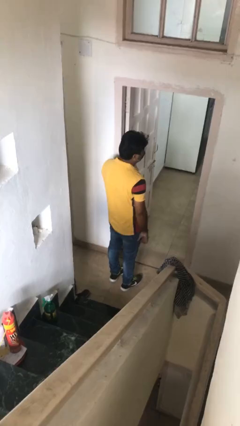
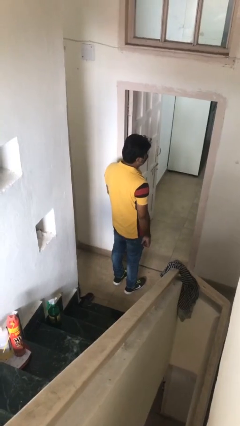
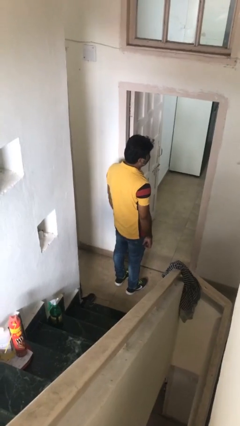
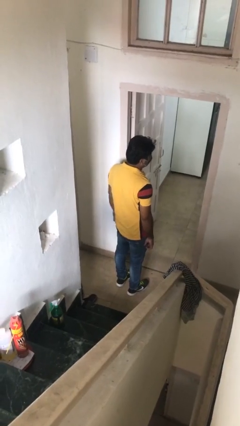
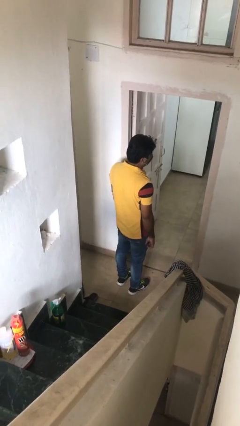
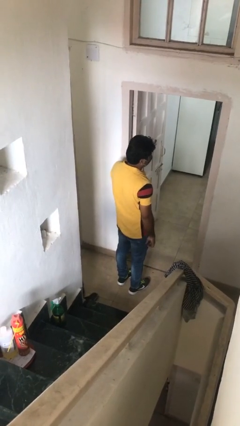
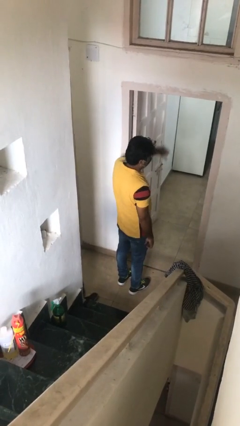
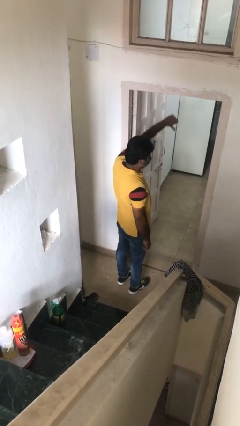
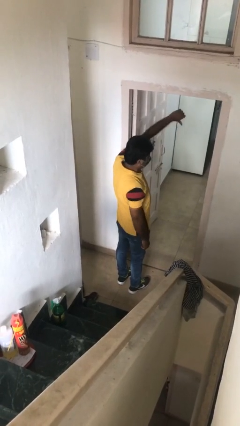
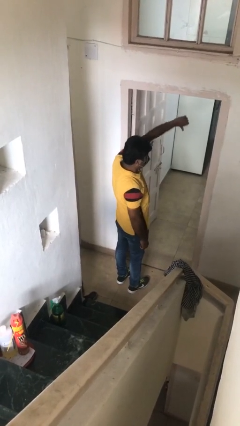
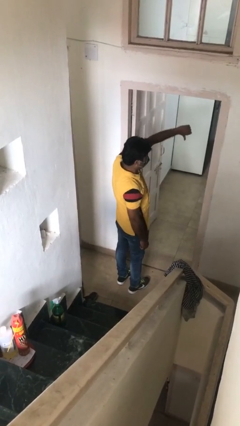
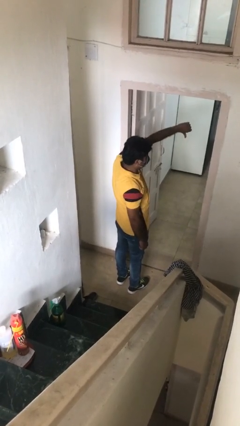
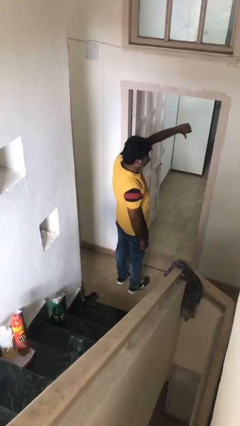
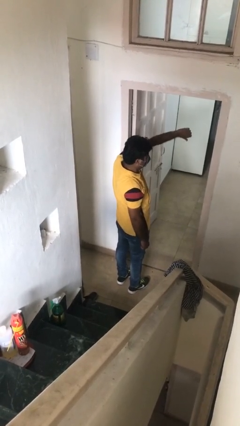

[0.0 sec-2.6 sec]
person gestures thumbs down

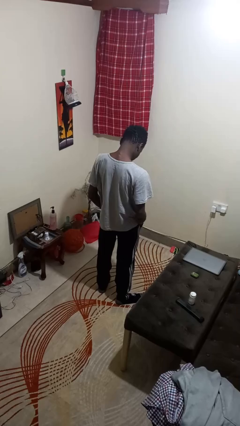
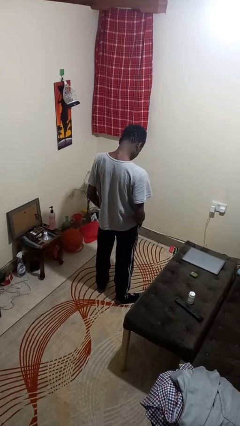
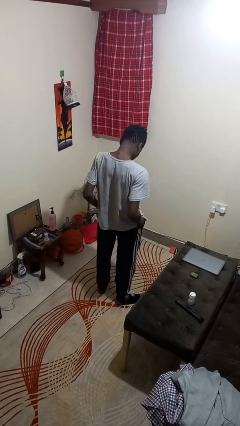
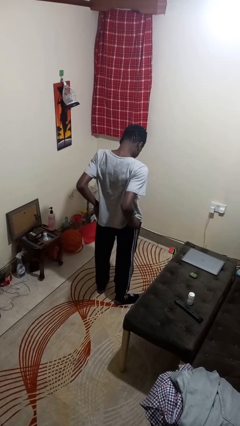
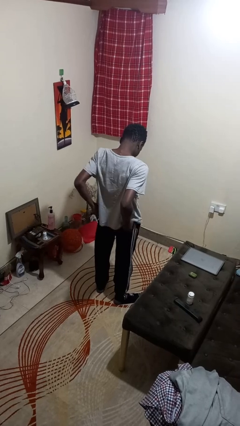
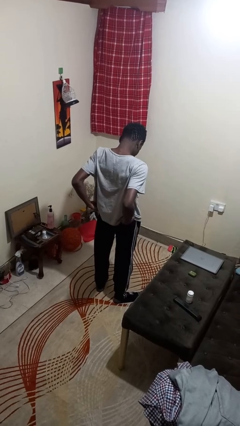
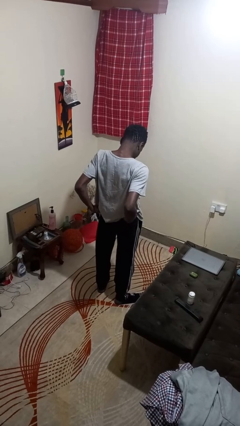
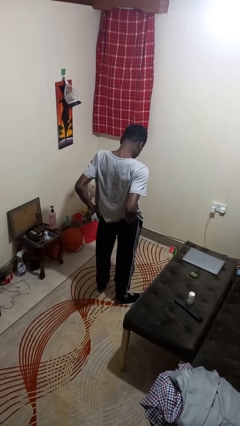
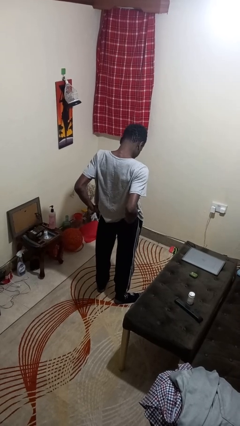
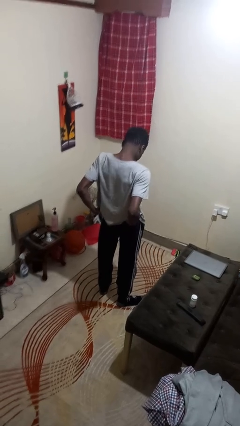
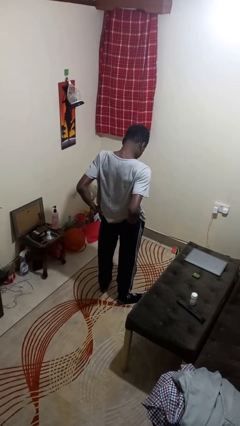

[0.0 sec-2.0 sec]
person puts hands in back pockets

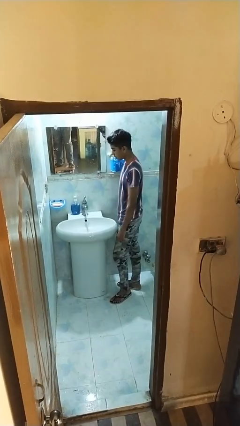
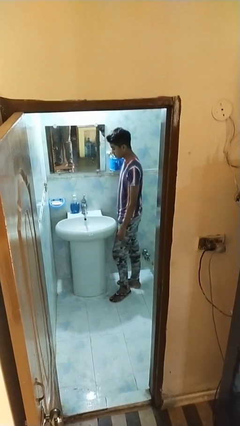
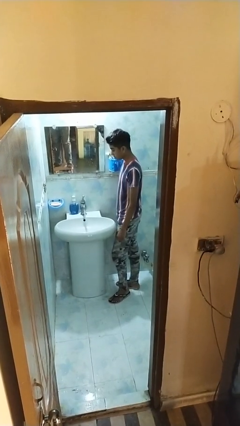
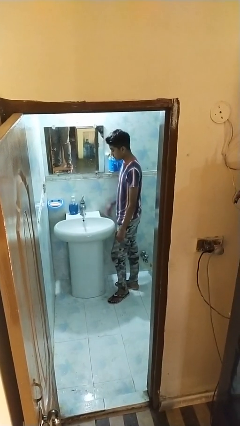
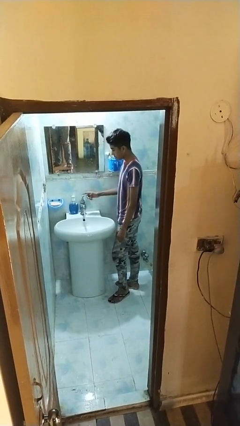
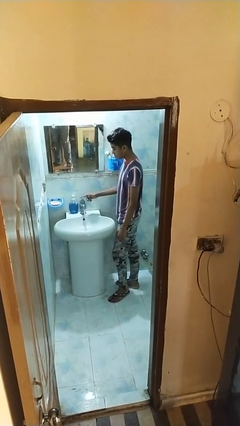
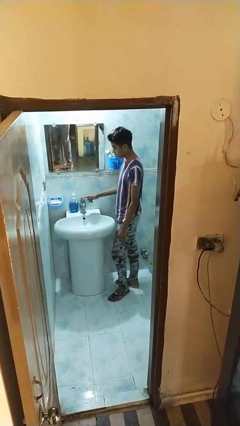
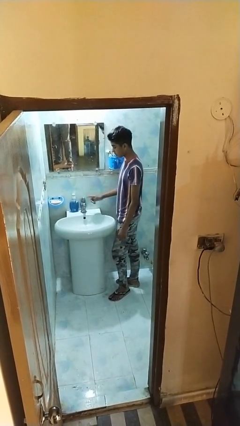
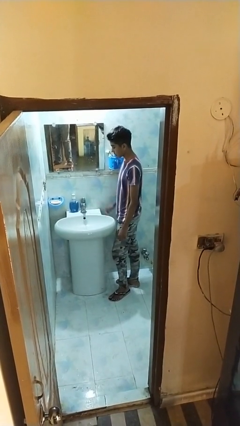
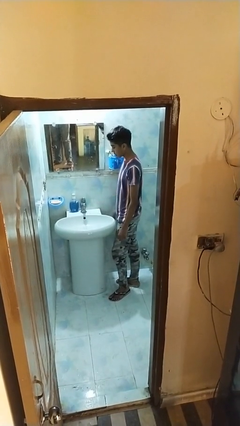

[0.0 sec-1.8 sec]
person turns off faucet

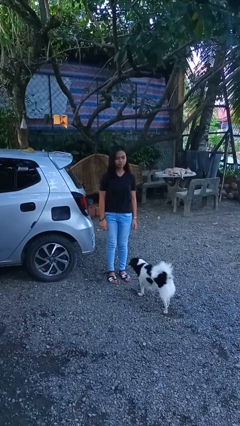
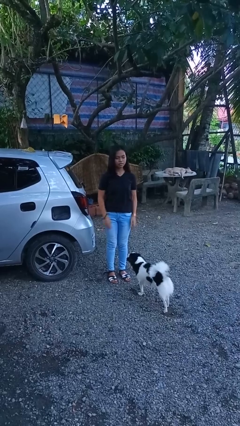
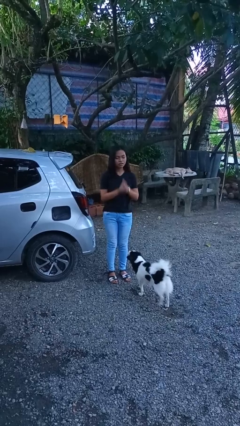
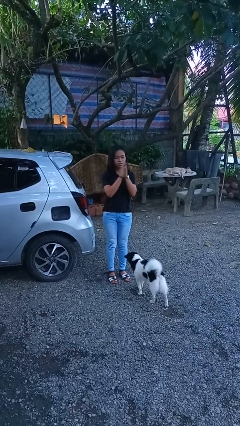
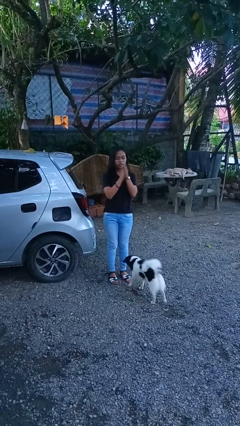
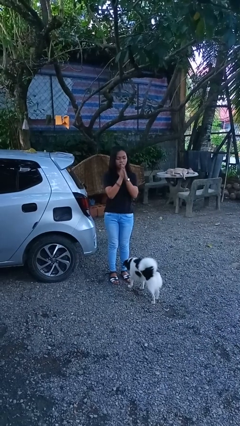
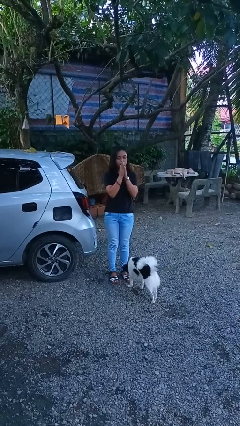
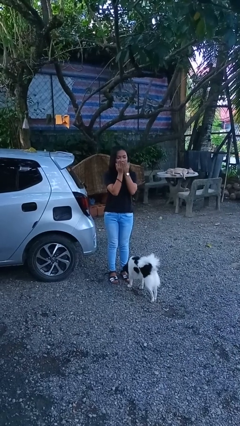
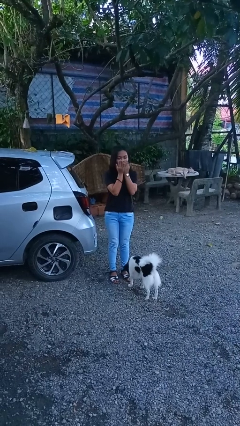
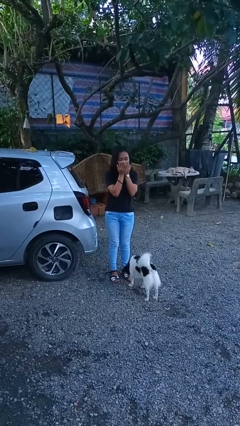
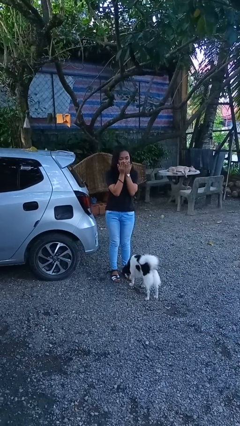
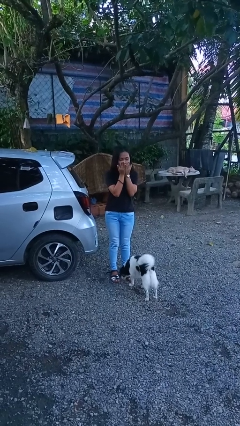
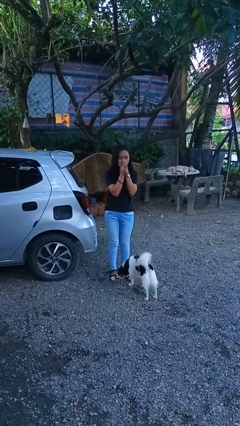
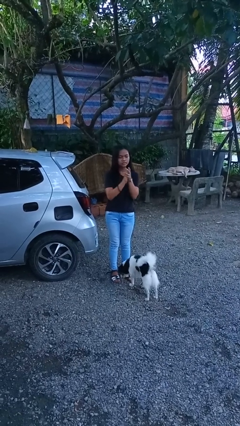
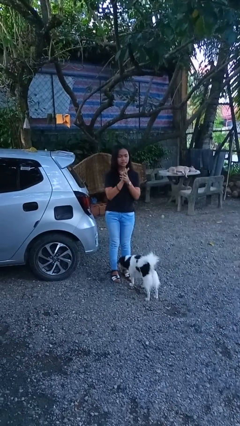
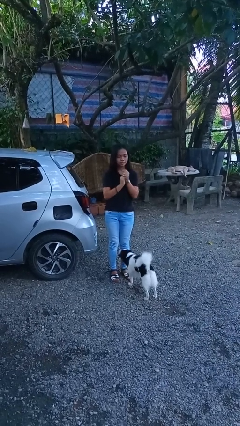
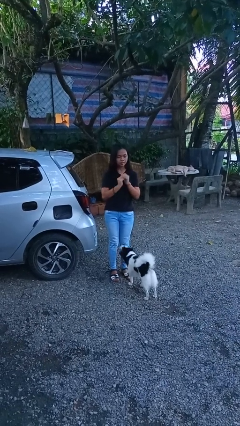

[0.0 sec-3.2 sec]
person blows into hands

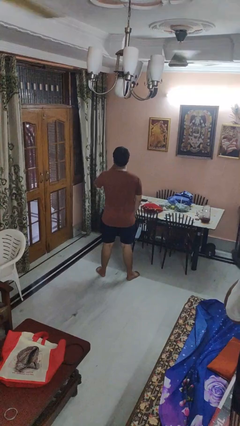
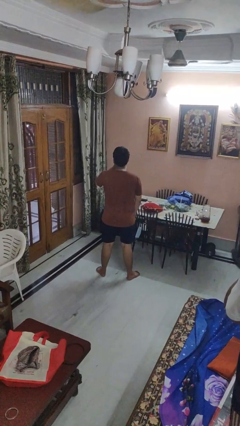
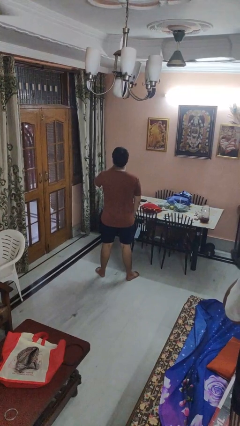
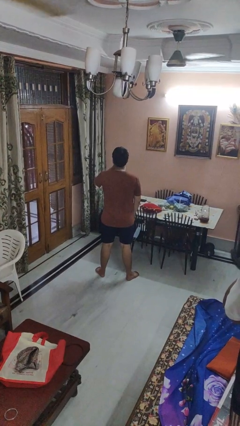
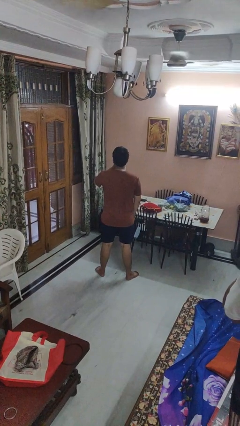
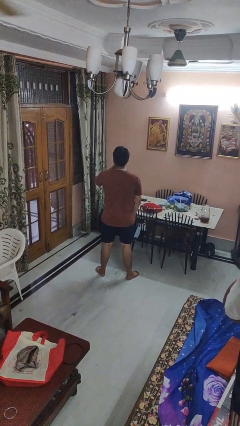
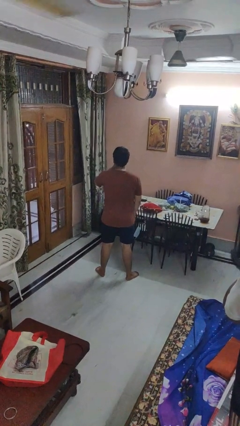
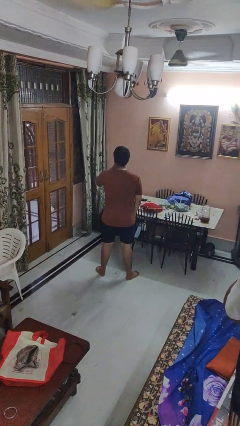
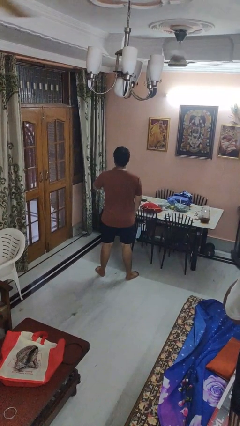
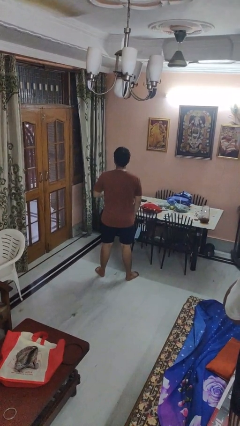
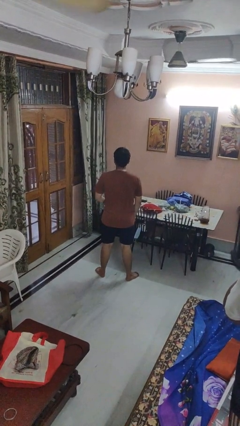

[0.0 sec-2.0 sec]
person gestures be quiet

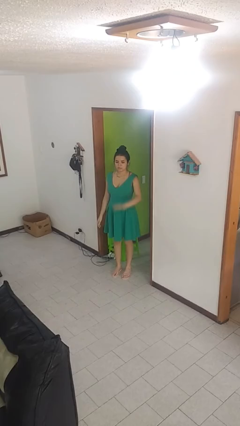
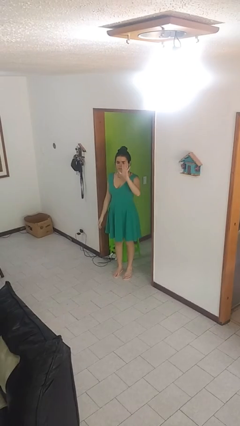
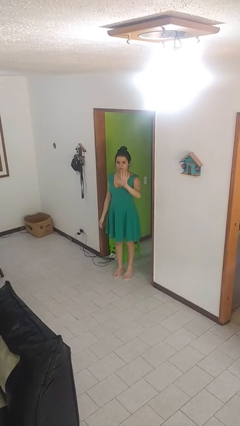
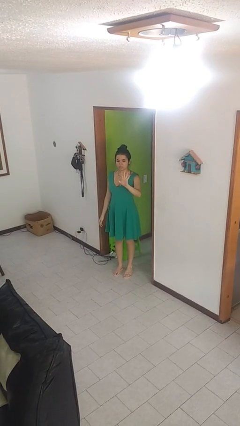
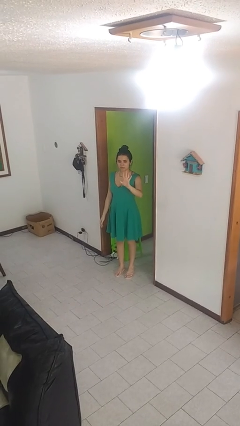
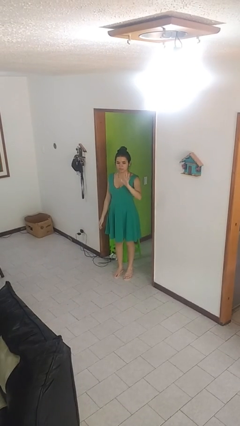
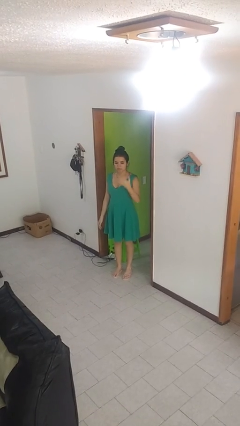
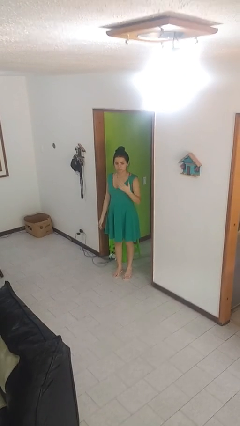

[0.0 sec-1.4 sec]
person gestures number five

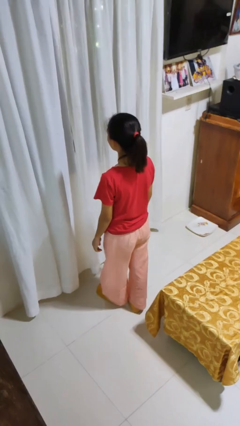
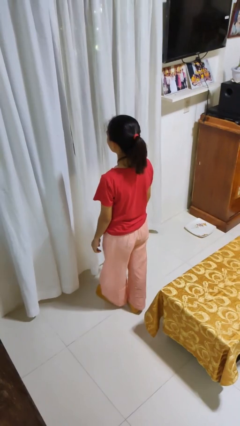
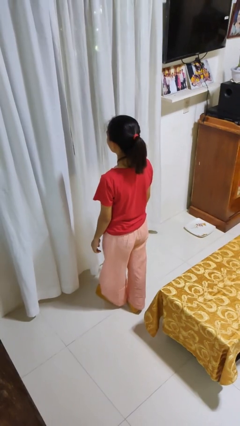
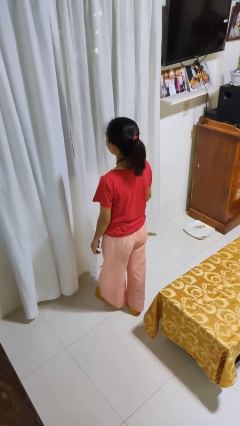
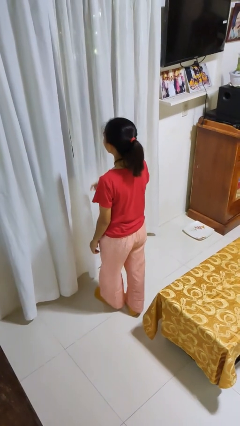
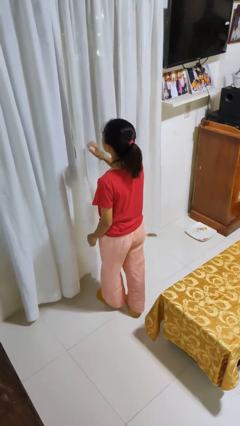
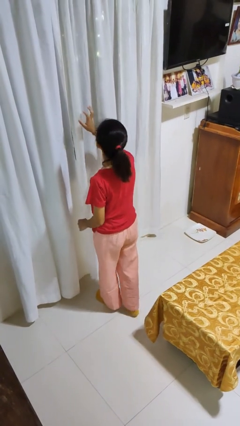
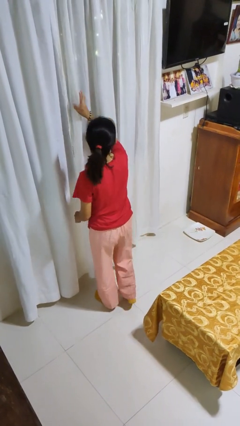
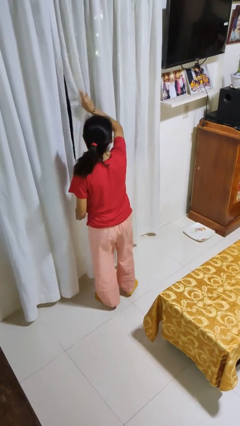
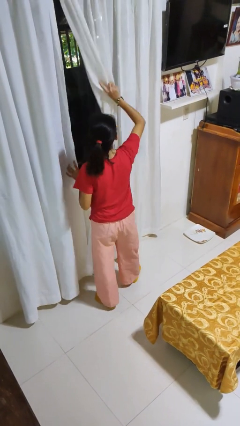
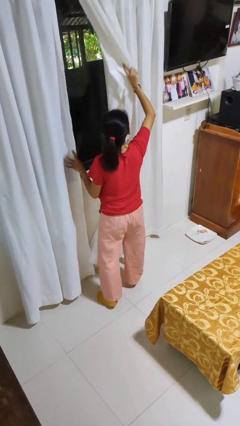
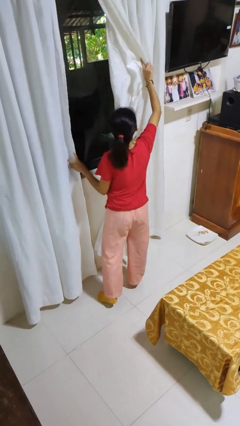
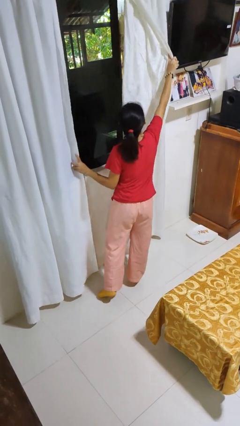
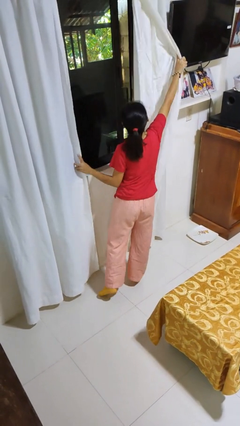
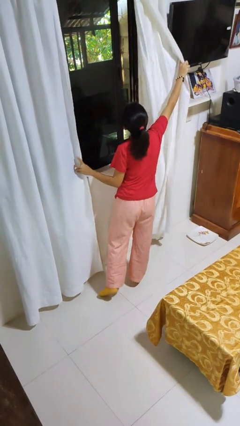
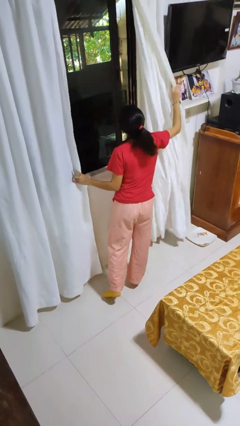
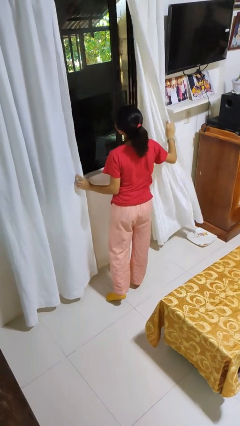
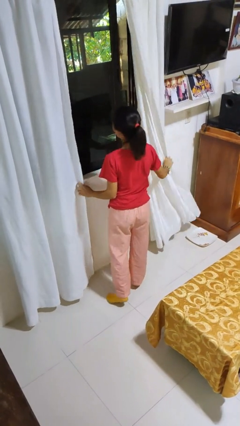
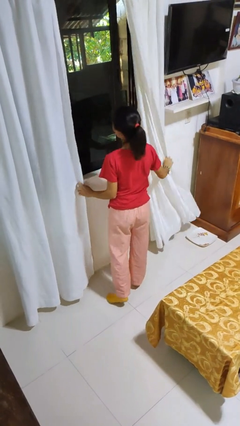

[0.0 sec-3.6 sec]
person opens curtains

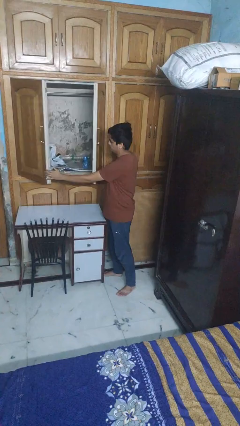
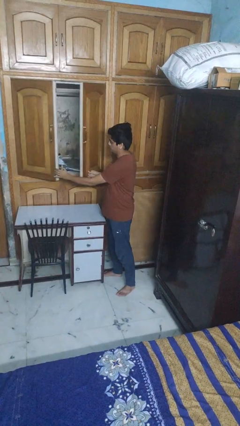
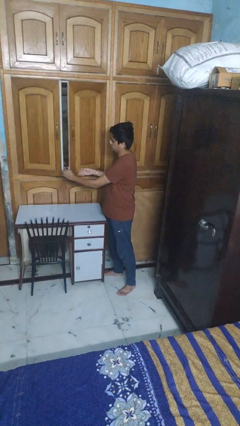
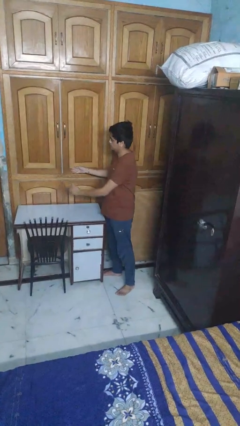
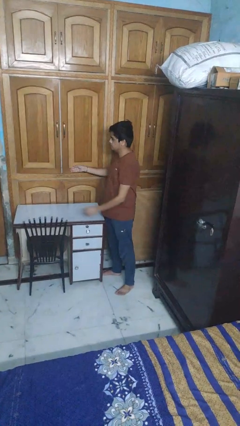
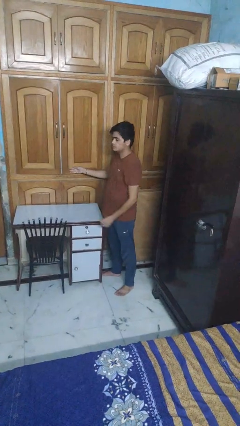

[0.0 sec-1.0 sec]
person closes closet door
